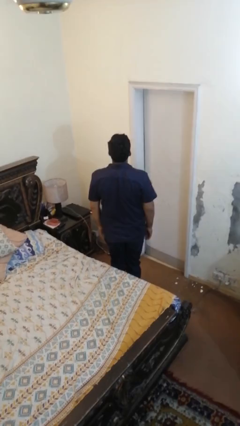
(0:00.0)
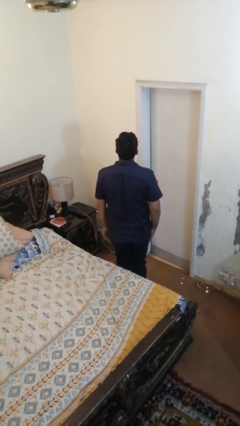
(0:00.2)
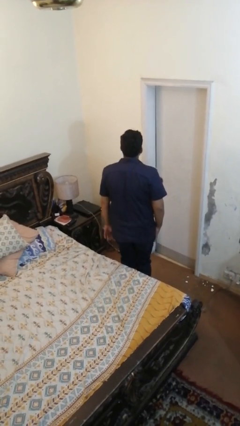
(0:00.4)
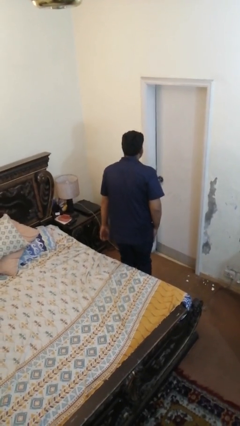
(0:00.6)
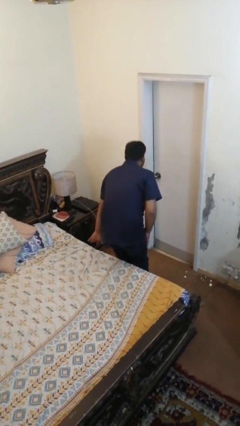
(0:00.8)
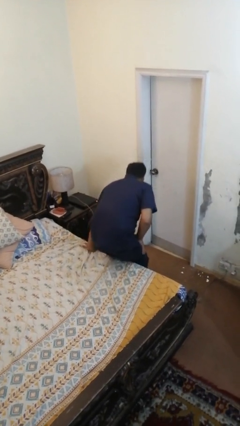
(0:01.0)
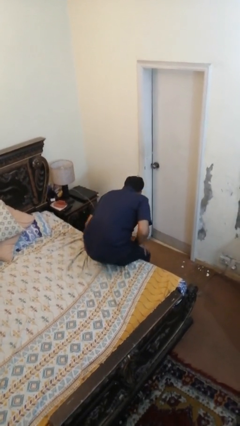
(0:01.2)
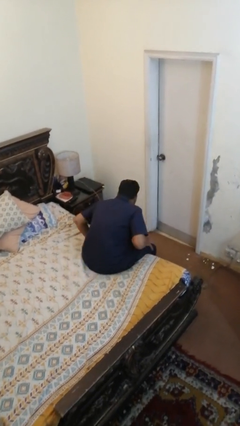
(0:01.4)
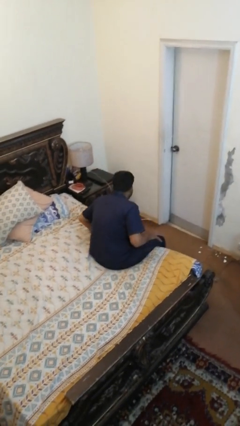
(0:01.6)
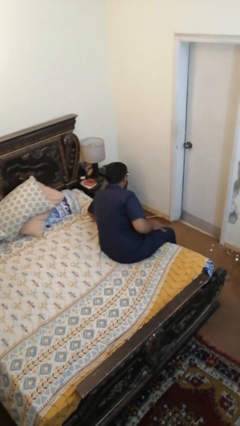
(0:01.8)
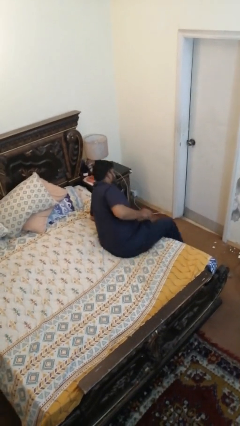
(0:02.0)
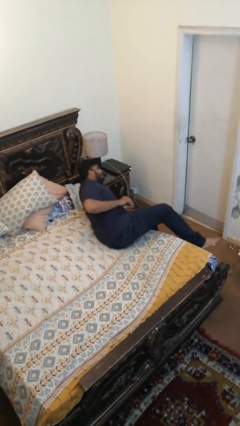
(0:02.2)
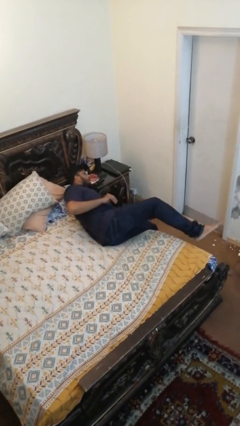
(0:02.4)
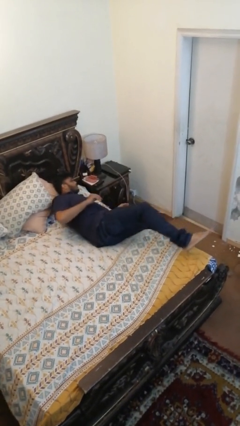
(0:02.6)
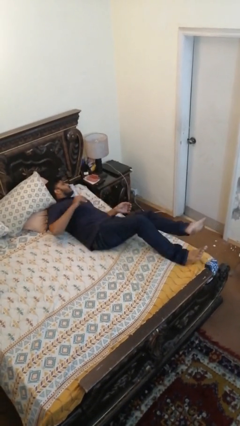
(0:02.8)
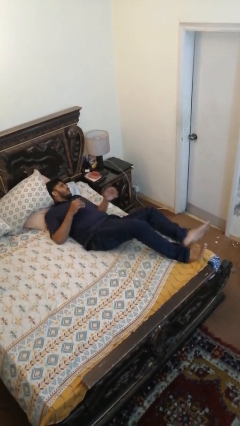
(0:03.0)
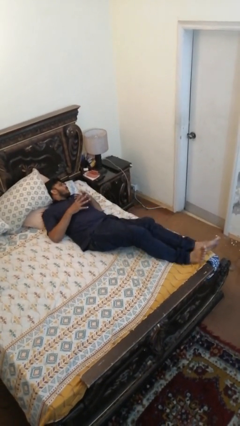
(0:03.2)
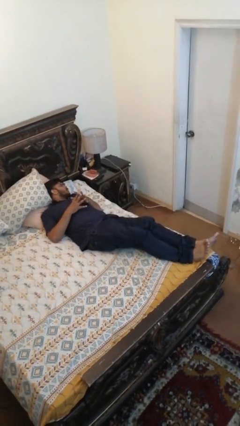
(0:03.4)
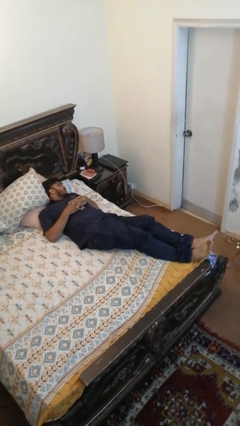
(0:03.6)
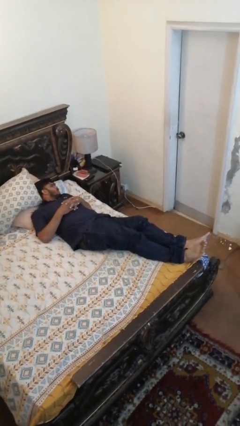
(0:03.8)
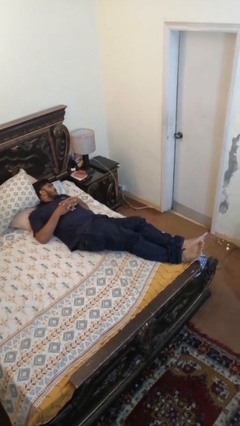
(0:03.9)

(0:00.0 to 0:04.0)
person lies down on bed

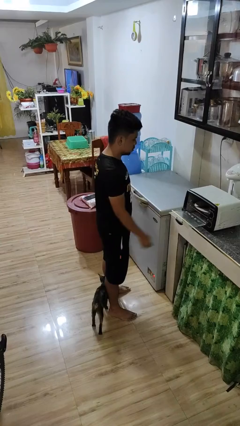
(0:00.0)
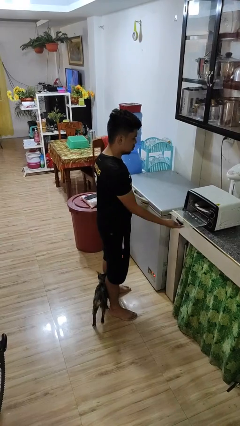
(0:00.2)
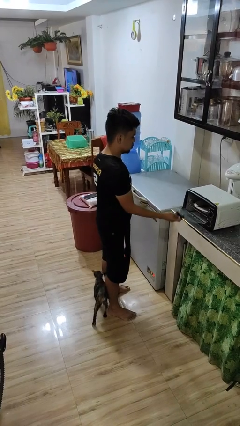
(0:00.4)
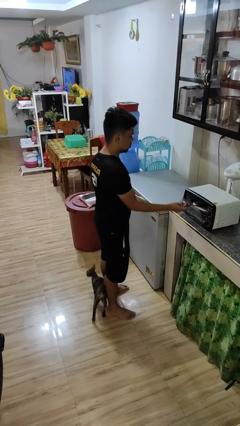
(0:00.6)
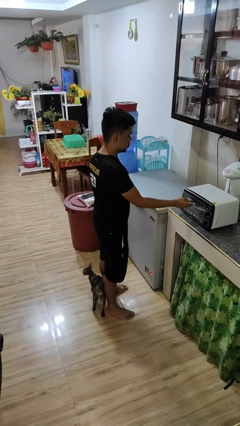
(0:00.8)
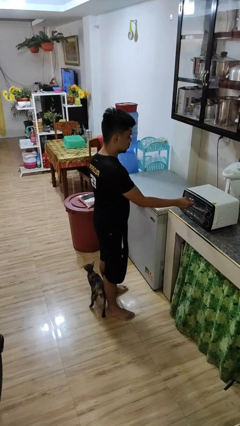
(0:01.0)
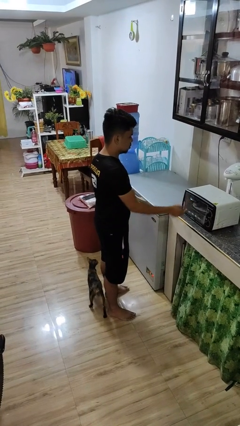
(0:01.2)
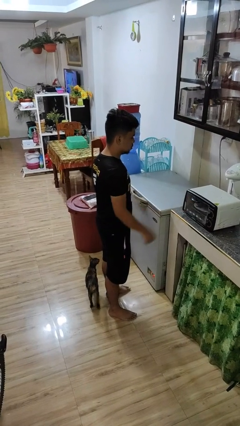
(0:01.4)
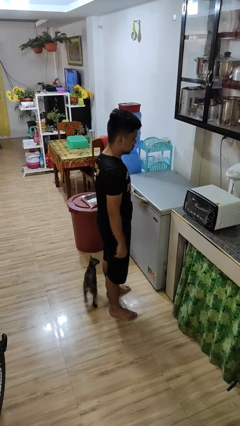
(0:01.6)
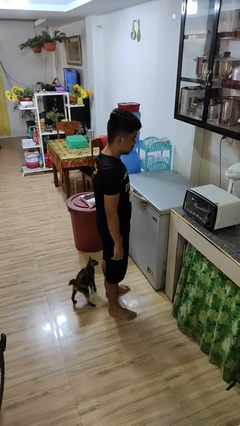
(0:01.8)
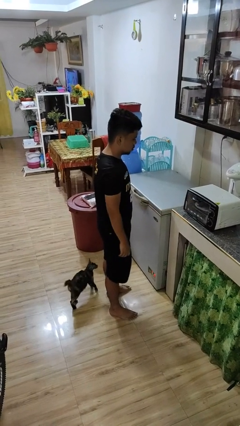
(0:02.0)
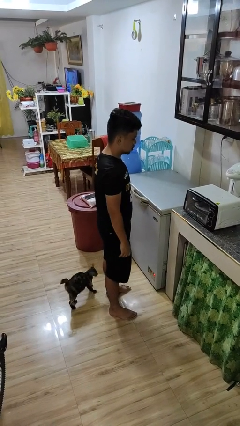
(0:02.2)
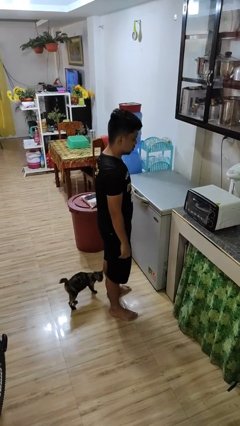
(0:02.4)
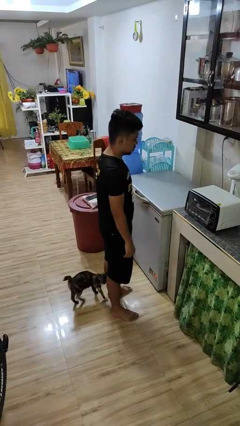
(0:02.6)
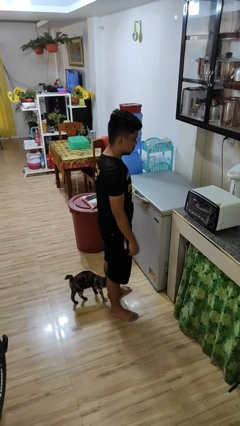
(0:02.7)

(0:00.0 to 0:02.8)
person closes microwave

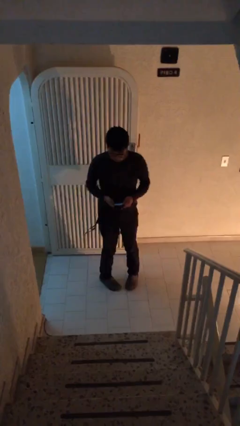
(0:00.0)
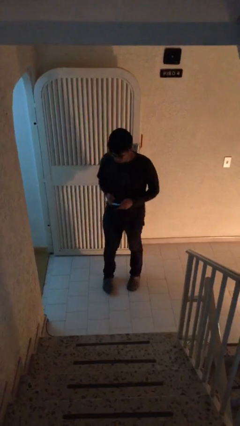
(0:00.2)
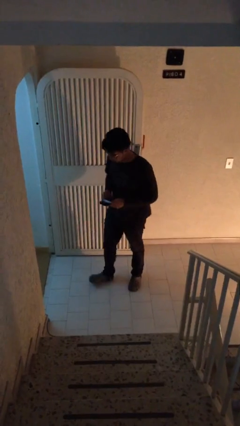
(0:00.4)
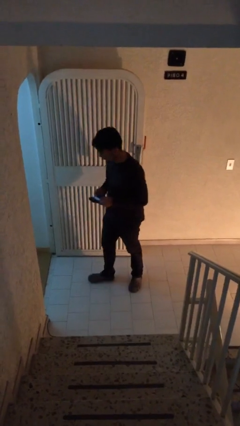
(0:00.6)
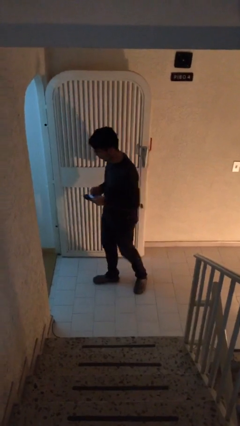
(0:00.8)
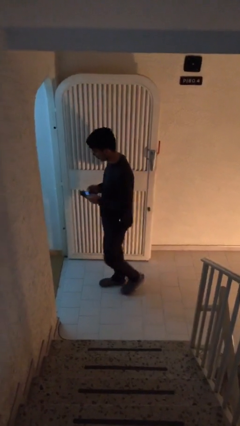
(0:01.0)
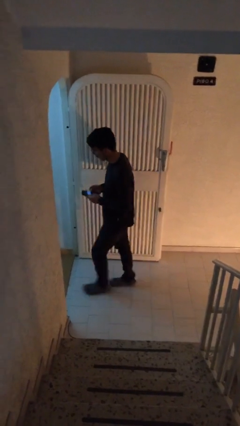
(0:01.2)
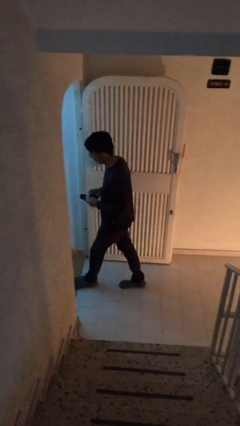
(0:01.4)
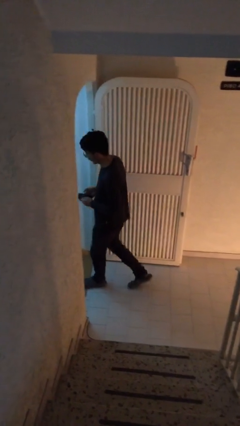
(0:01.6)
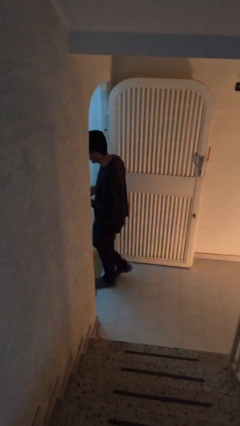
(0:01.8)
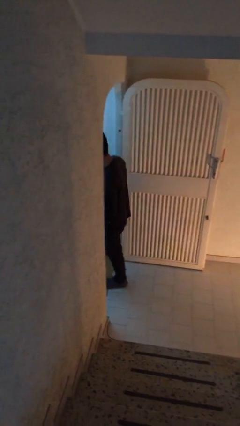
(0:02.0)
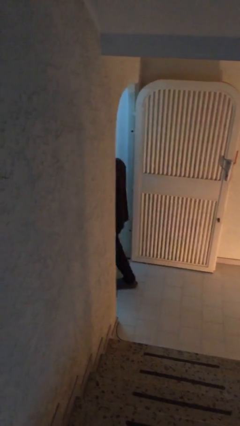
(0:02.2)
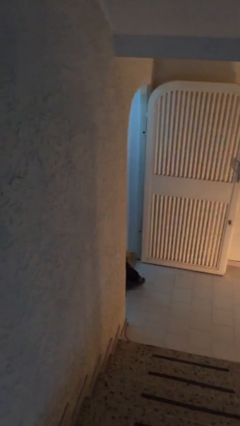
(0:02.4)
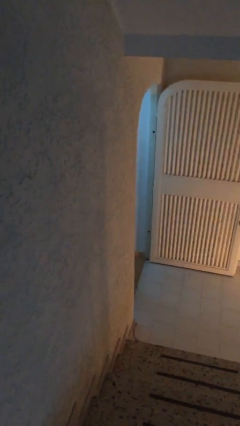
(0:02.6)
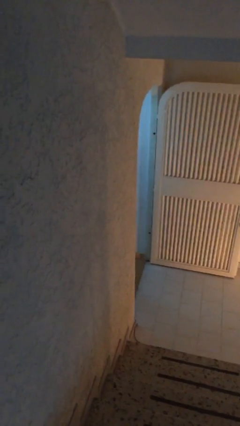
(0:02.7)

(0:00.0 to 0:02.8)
person exits scene through structure
